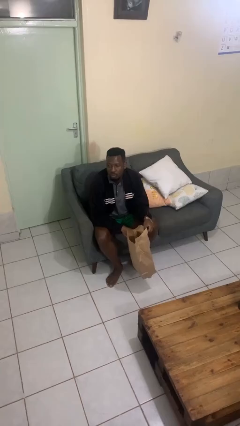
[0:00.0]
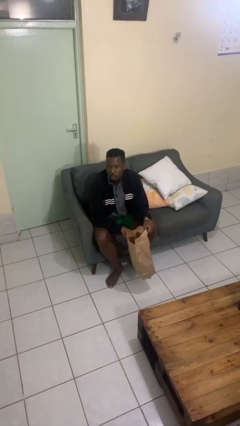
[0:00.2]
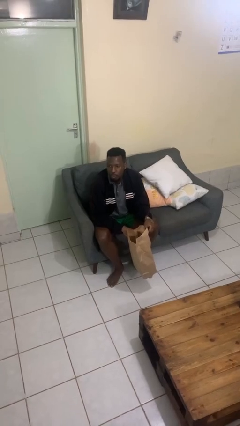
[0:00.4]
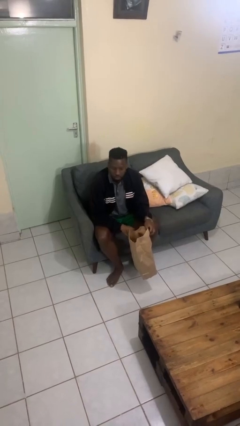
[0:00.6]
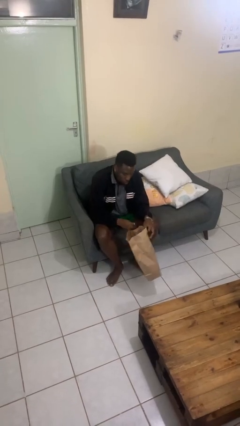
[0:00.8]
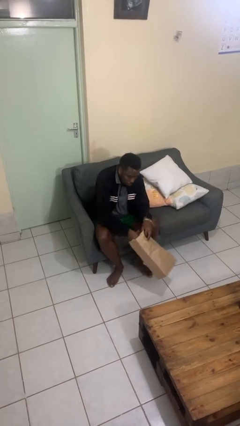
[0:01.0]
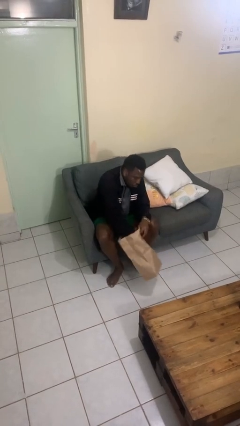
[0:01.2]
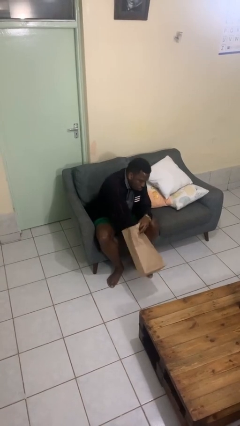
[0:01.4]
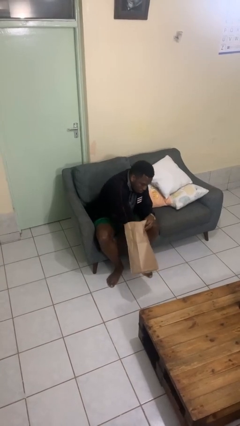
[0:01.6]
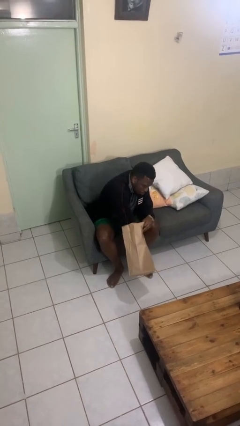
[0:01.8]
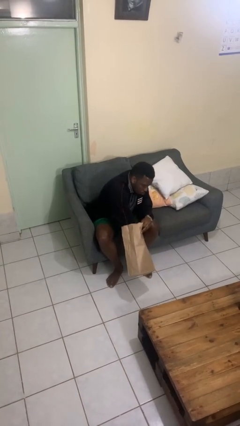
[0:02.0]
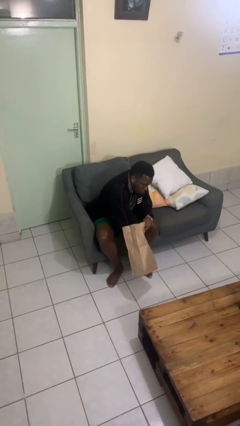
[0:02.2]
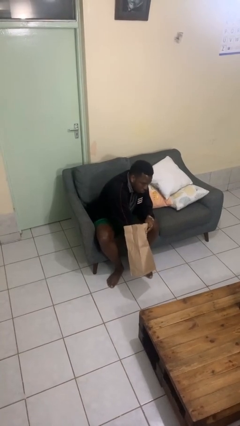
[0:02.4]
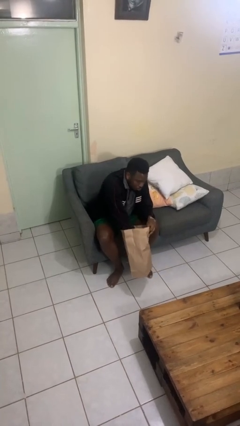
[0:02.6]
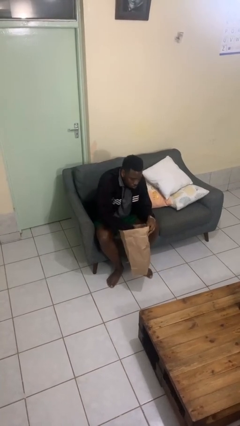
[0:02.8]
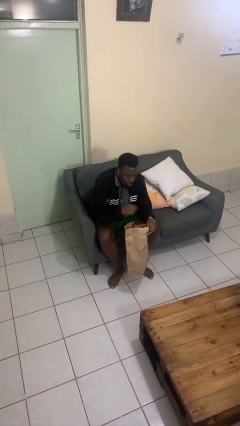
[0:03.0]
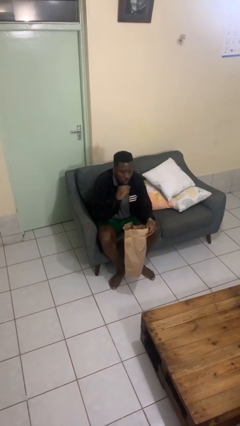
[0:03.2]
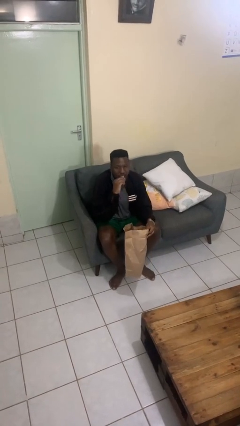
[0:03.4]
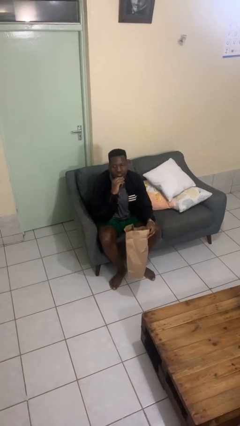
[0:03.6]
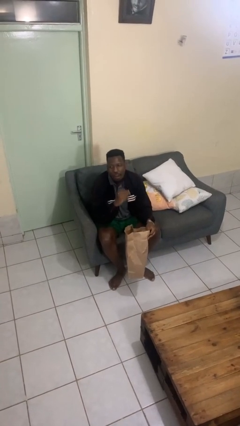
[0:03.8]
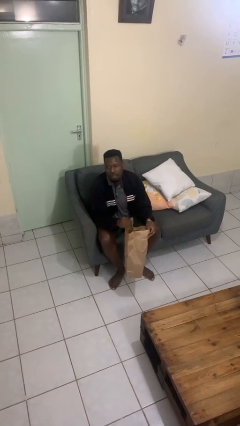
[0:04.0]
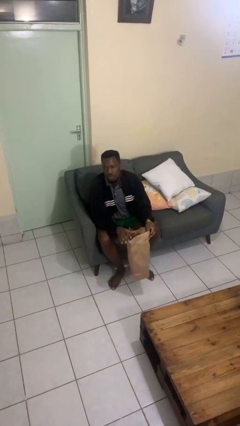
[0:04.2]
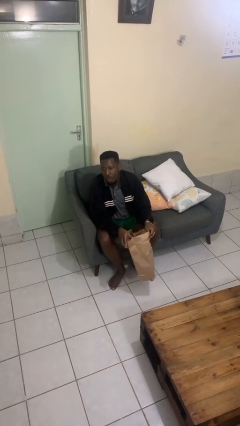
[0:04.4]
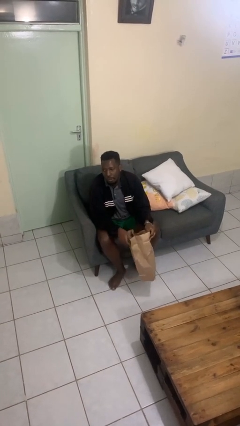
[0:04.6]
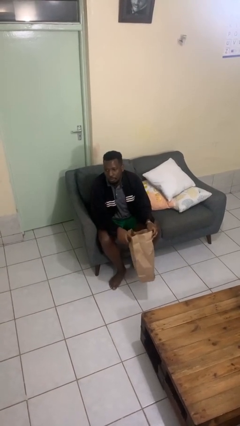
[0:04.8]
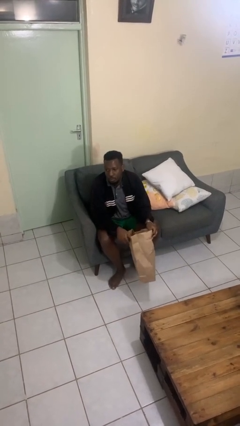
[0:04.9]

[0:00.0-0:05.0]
person eats snack from bag

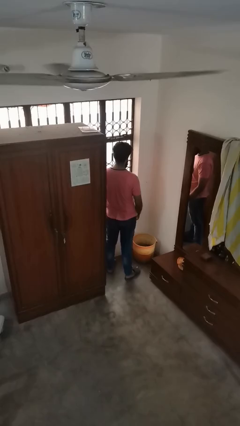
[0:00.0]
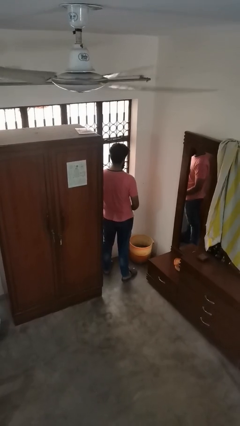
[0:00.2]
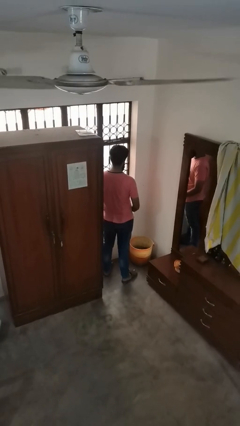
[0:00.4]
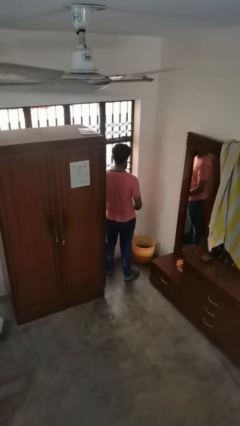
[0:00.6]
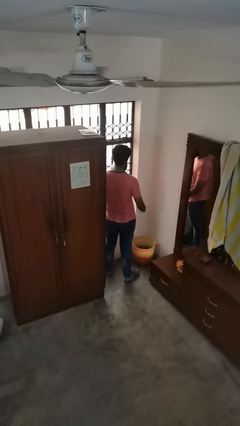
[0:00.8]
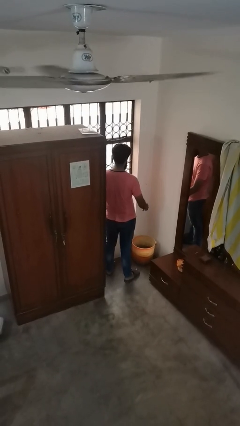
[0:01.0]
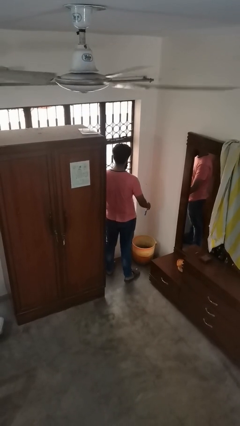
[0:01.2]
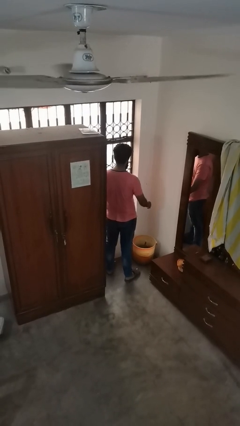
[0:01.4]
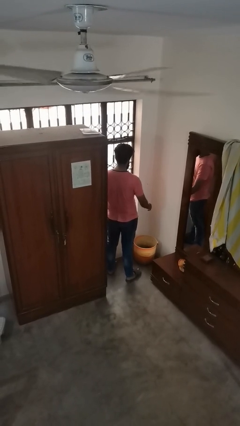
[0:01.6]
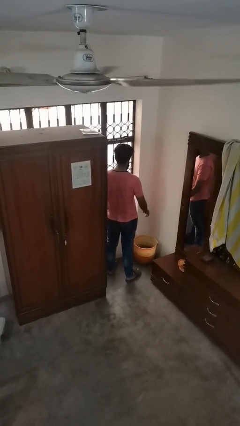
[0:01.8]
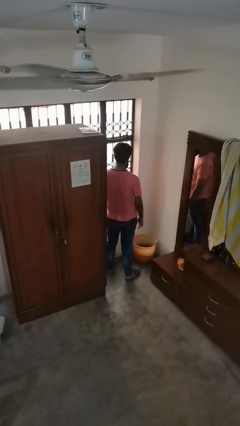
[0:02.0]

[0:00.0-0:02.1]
person discards trash

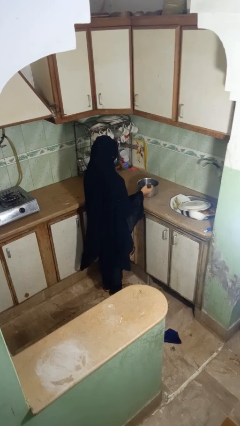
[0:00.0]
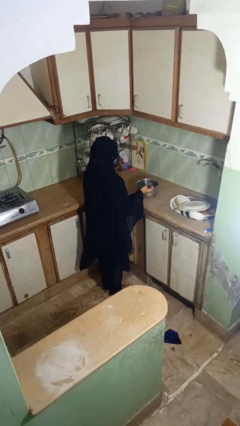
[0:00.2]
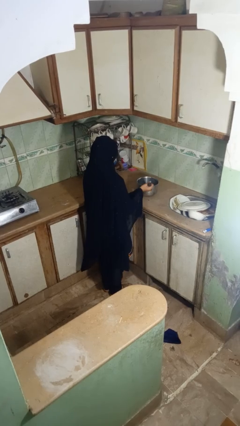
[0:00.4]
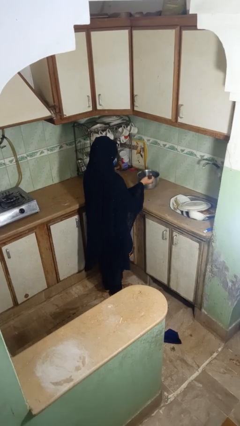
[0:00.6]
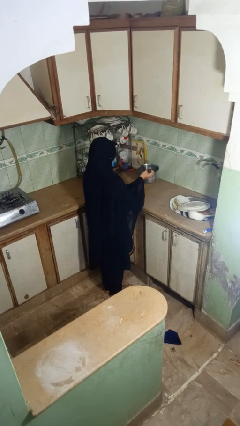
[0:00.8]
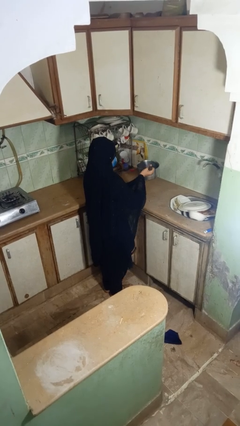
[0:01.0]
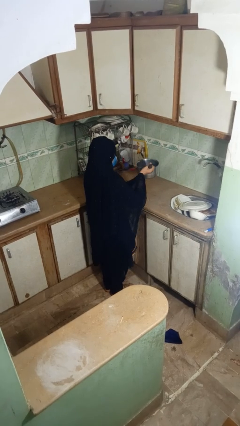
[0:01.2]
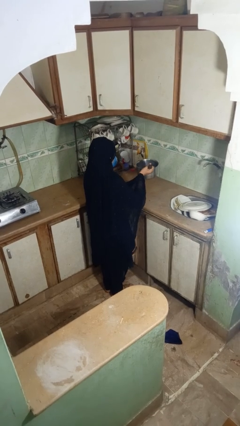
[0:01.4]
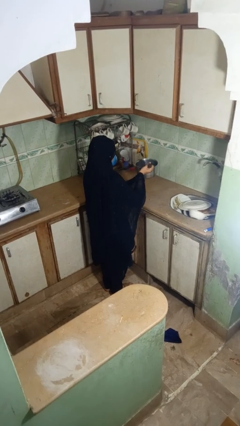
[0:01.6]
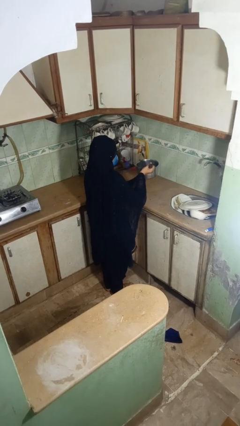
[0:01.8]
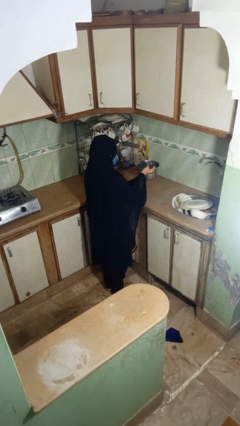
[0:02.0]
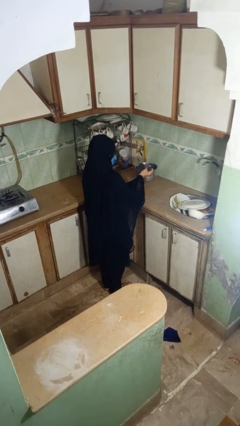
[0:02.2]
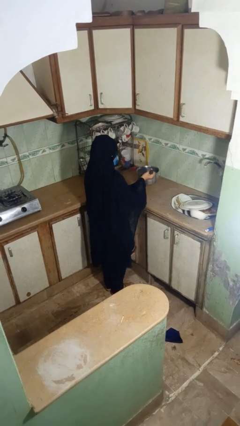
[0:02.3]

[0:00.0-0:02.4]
person picks up object from countertop

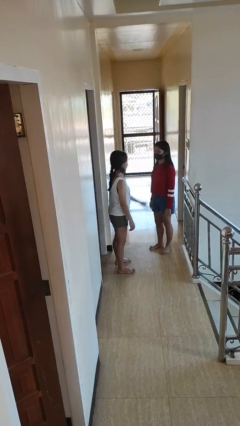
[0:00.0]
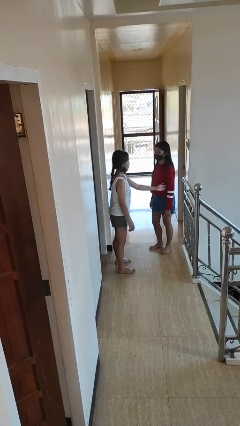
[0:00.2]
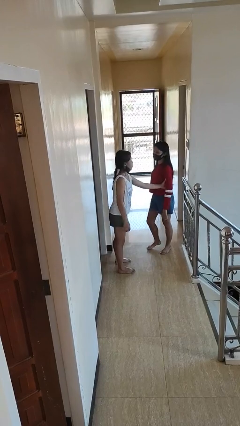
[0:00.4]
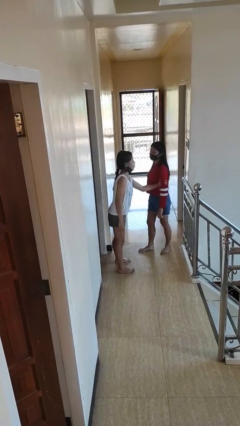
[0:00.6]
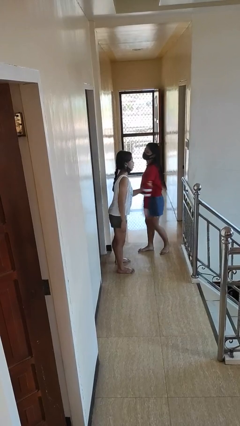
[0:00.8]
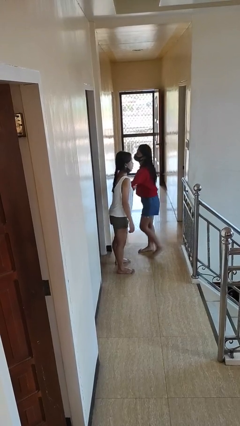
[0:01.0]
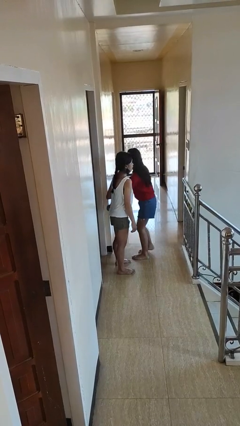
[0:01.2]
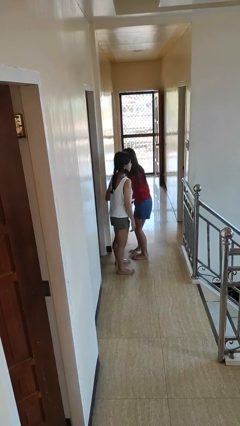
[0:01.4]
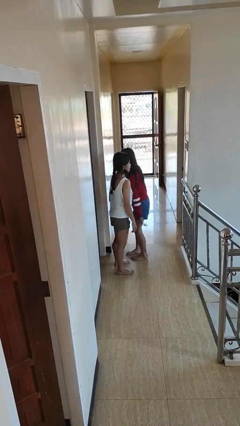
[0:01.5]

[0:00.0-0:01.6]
person grabs person by bicep

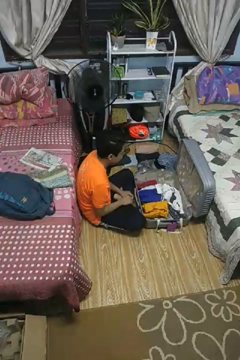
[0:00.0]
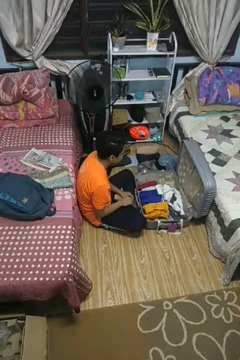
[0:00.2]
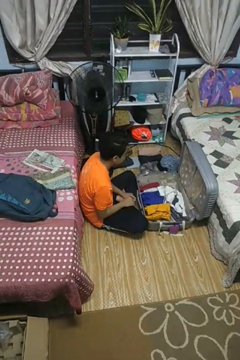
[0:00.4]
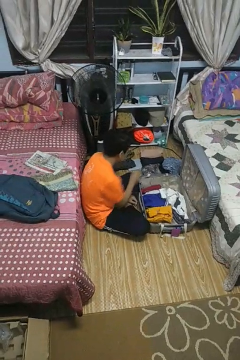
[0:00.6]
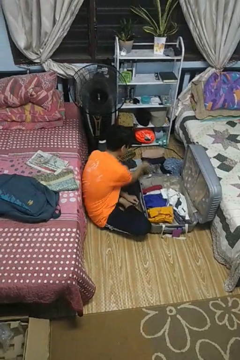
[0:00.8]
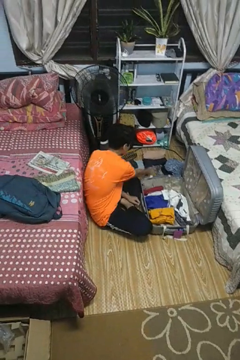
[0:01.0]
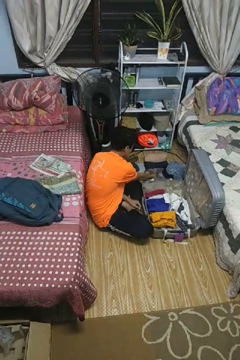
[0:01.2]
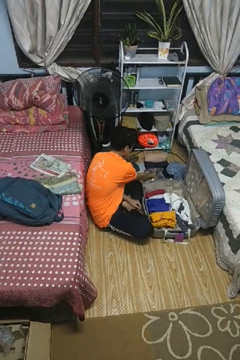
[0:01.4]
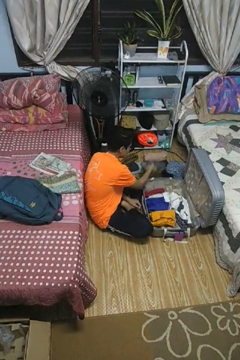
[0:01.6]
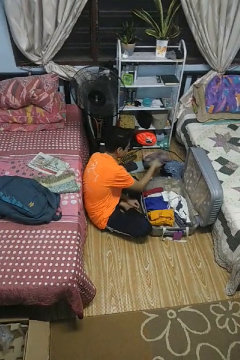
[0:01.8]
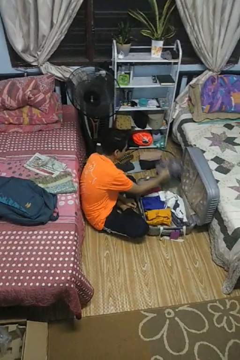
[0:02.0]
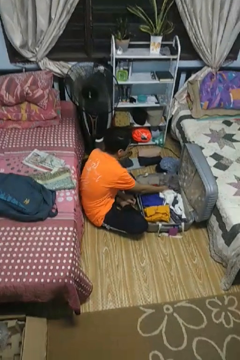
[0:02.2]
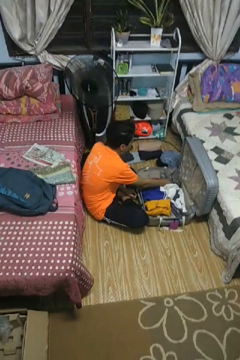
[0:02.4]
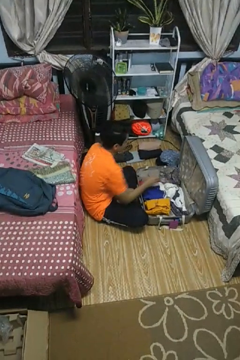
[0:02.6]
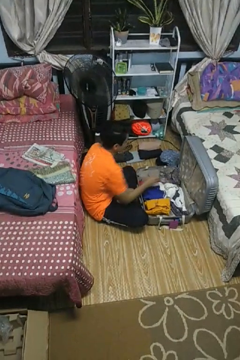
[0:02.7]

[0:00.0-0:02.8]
person loads clothes into suitcase

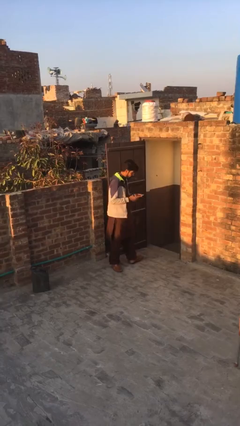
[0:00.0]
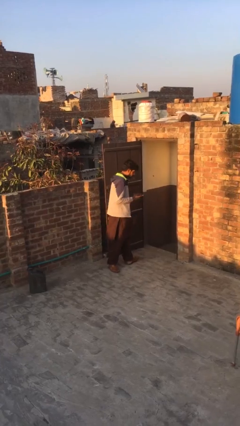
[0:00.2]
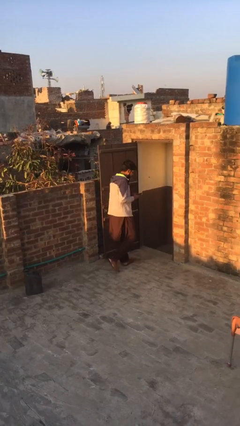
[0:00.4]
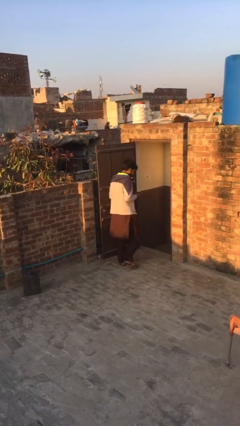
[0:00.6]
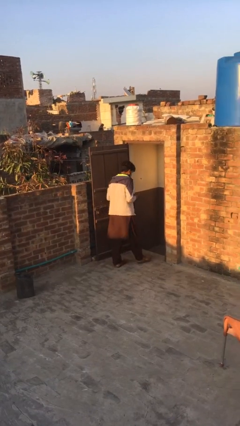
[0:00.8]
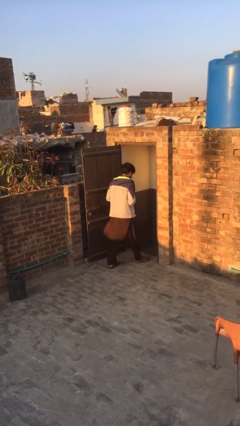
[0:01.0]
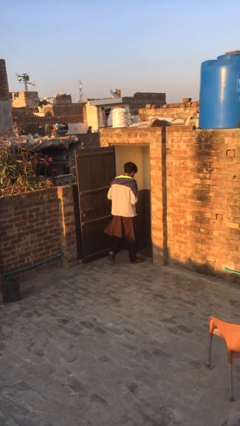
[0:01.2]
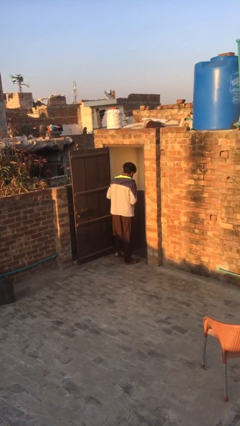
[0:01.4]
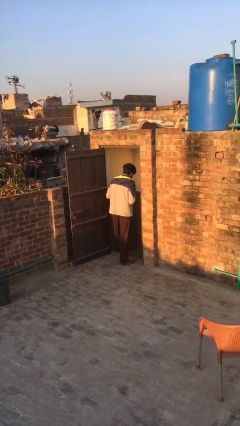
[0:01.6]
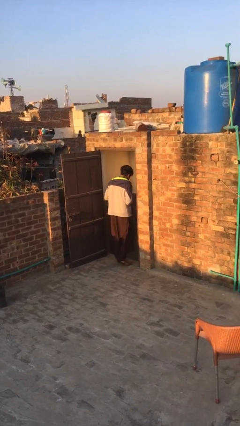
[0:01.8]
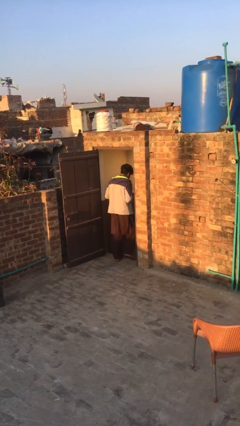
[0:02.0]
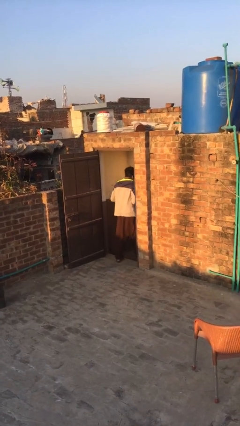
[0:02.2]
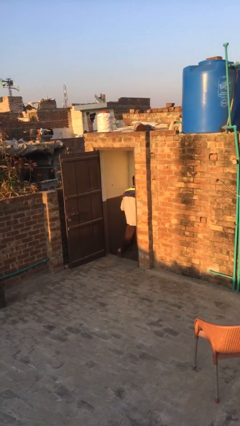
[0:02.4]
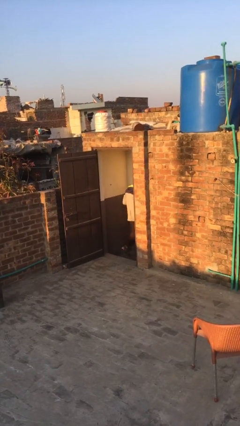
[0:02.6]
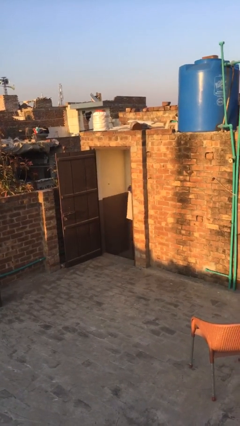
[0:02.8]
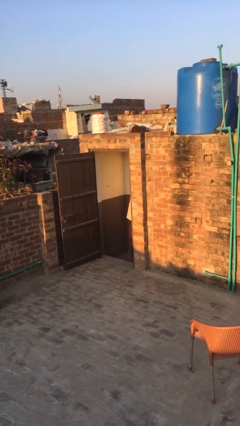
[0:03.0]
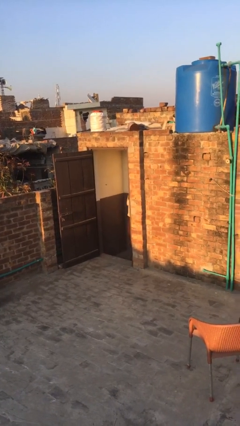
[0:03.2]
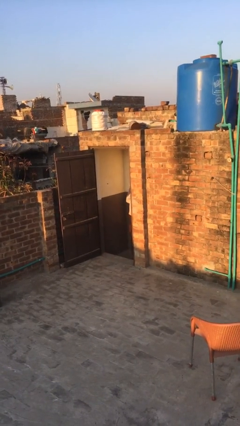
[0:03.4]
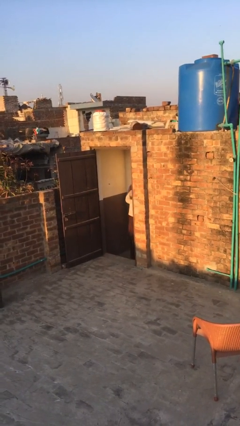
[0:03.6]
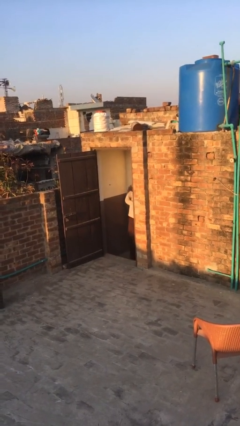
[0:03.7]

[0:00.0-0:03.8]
person enters scene through structure
